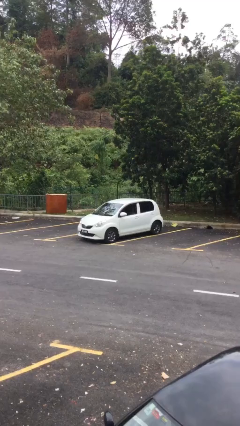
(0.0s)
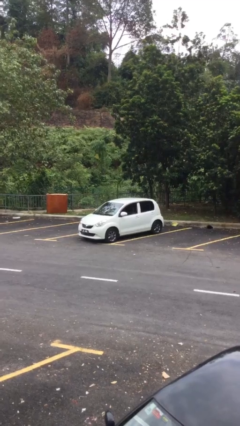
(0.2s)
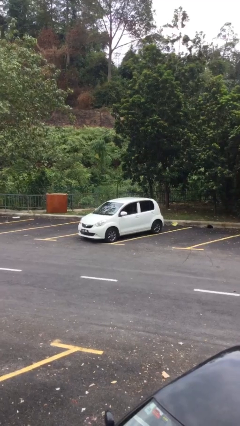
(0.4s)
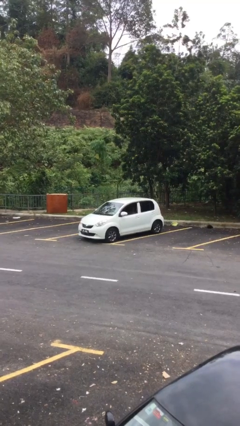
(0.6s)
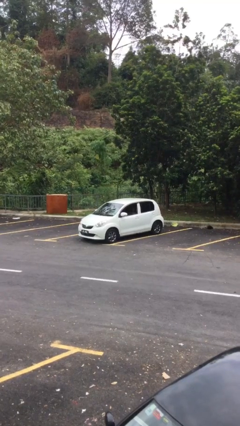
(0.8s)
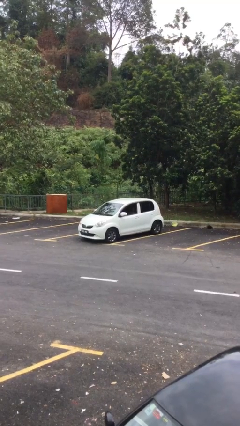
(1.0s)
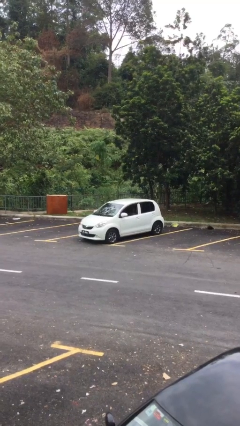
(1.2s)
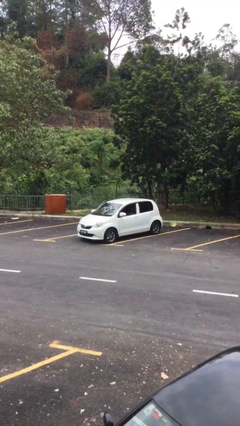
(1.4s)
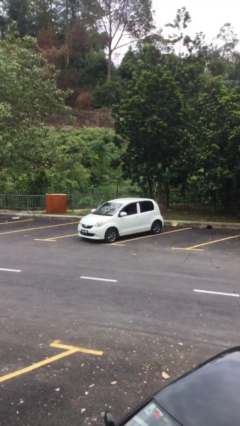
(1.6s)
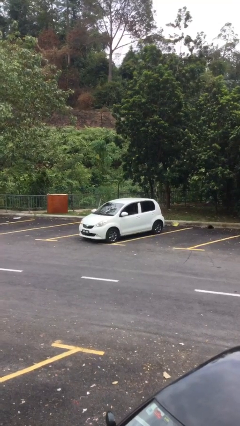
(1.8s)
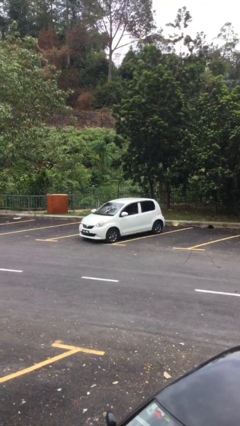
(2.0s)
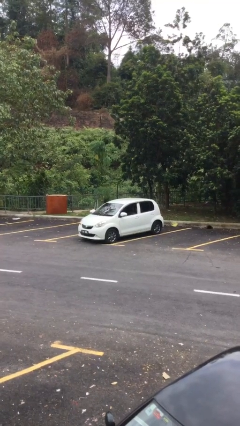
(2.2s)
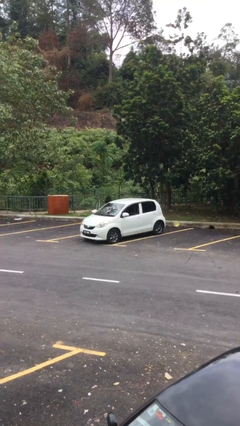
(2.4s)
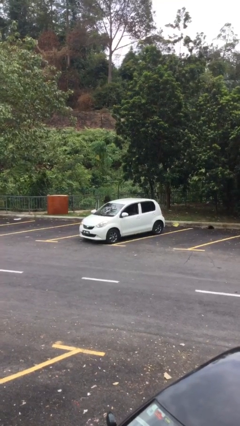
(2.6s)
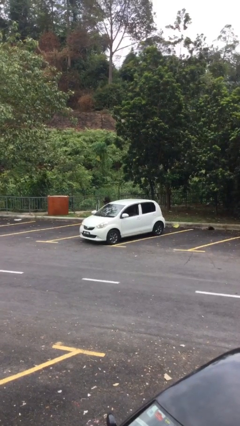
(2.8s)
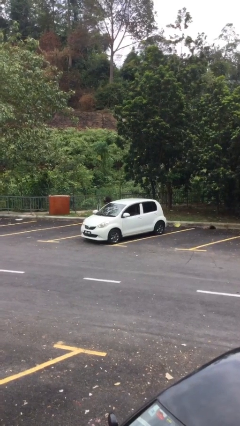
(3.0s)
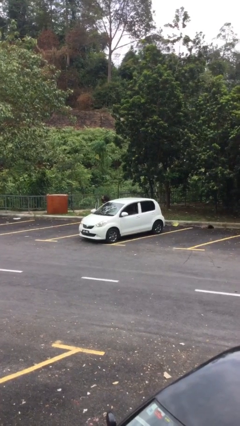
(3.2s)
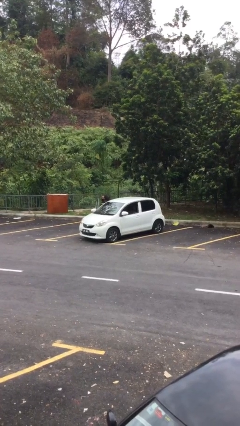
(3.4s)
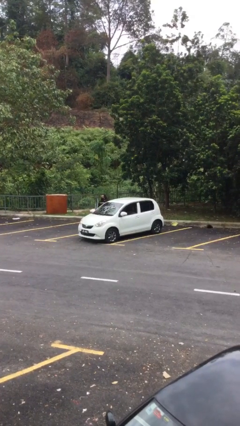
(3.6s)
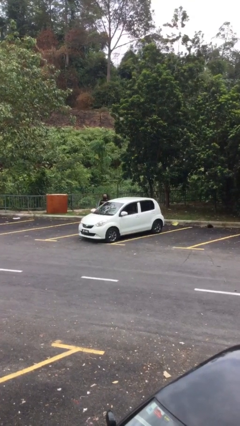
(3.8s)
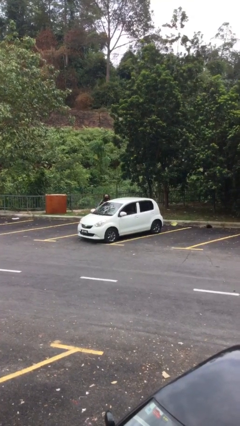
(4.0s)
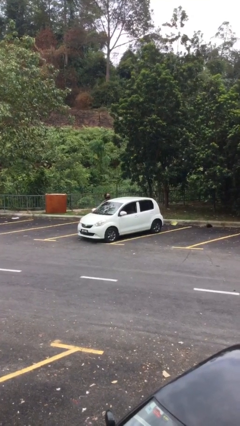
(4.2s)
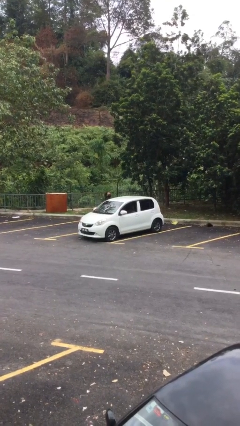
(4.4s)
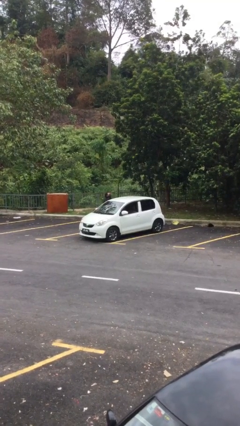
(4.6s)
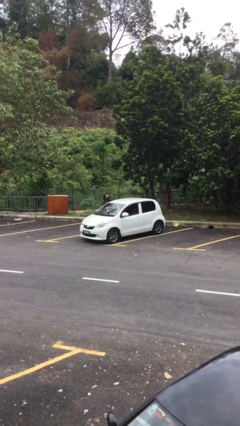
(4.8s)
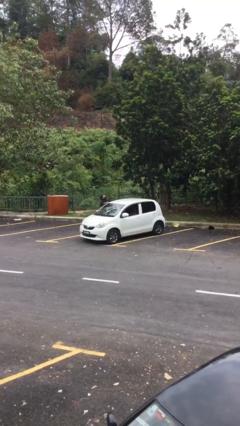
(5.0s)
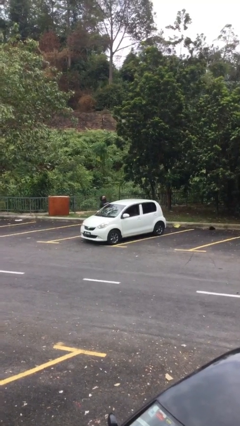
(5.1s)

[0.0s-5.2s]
car drops off person

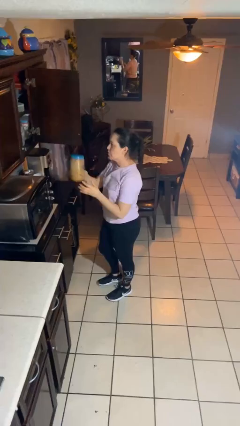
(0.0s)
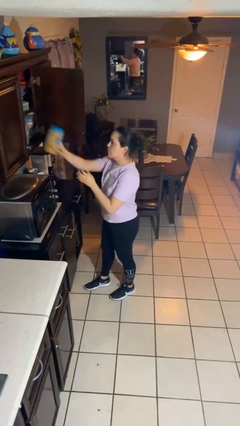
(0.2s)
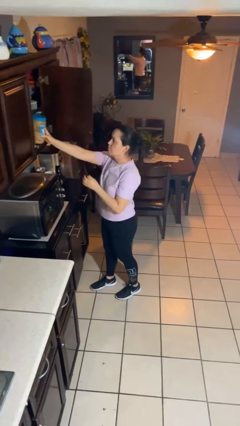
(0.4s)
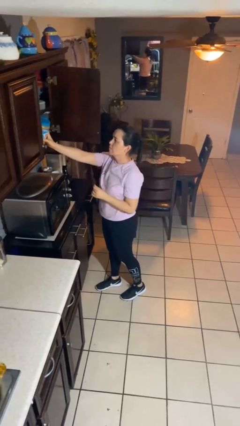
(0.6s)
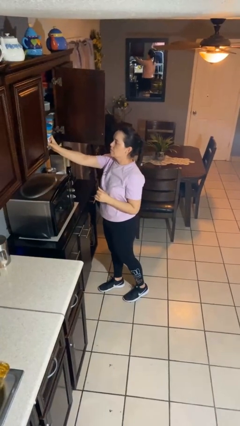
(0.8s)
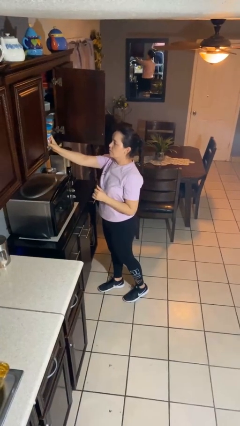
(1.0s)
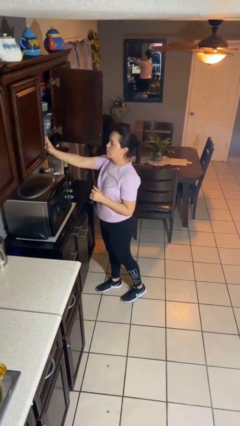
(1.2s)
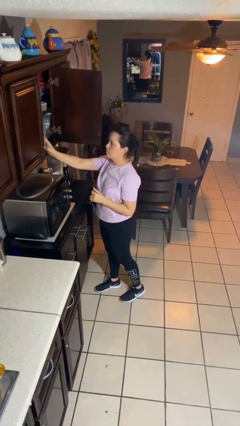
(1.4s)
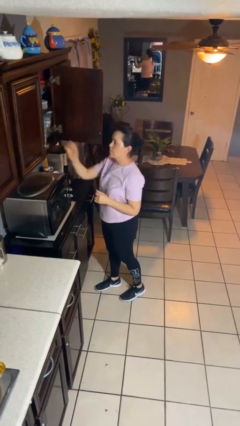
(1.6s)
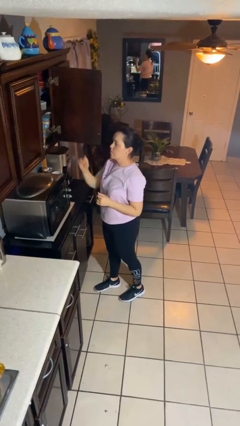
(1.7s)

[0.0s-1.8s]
person puts down object into cabinet

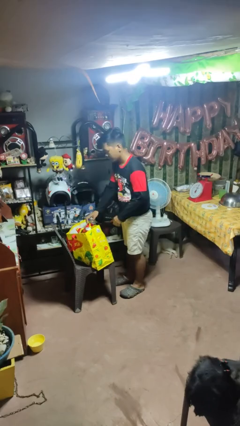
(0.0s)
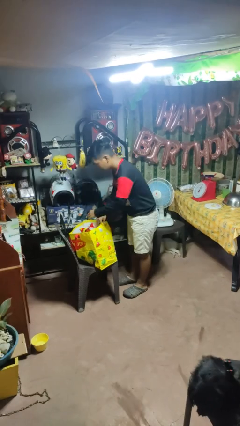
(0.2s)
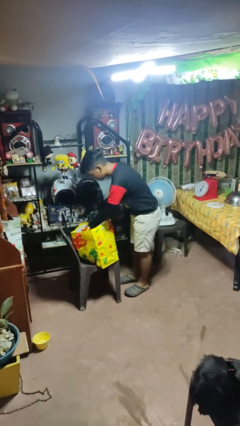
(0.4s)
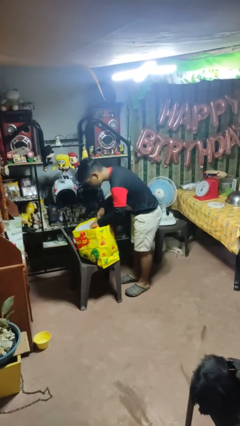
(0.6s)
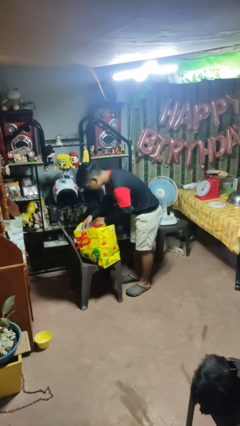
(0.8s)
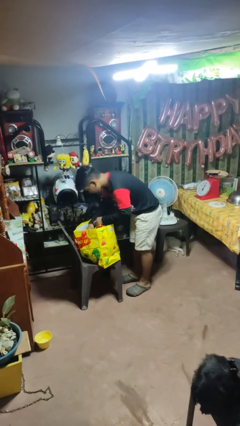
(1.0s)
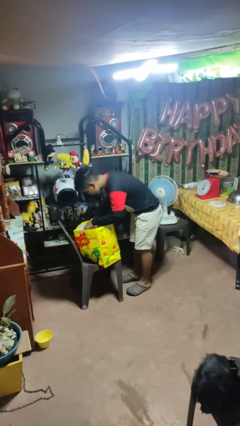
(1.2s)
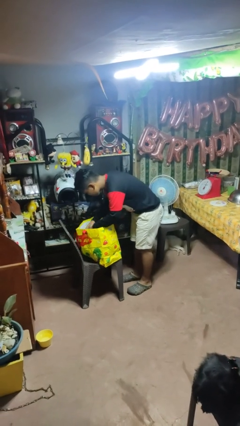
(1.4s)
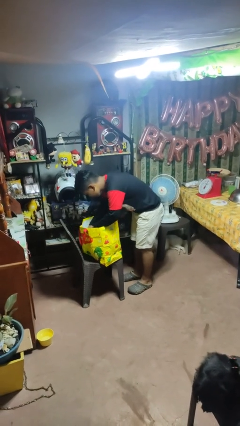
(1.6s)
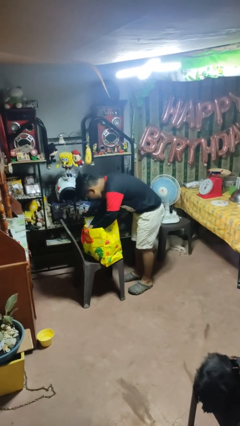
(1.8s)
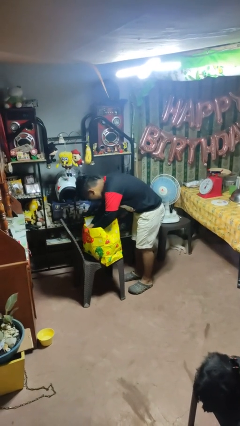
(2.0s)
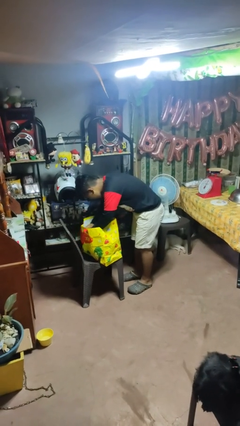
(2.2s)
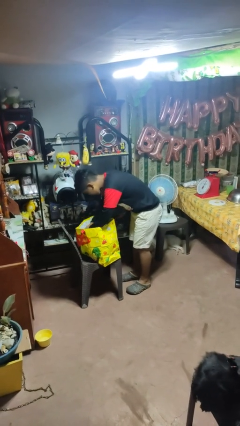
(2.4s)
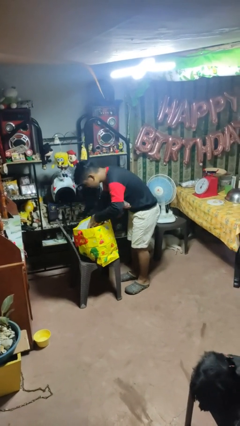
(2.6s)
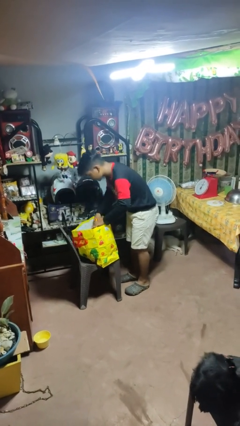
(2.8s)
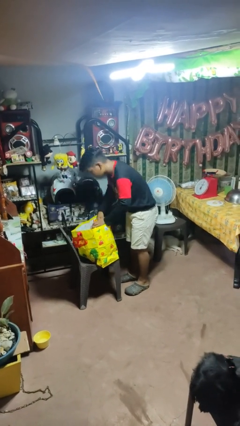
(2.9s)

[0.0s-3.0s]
person searches in bag

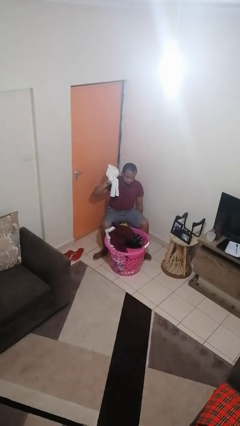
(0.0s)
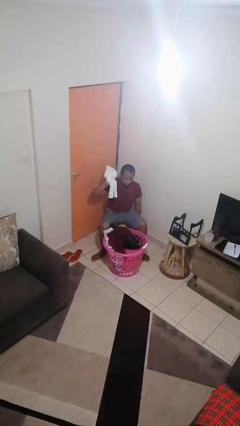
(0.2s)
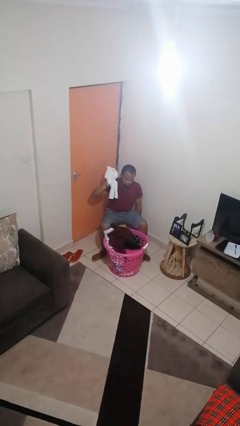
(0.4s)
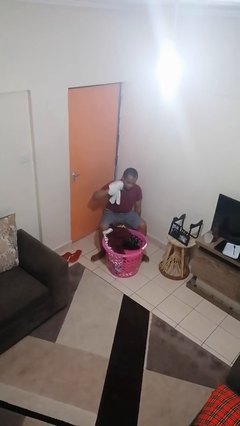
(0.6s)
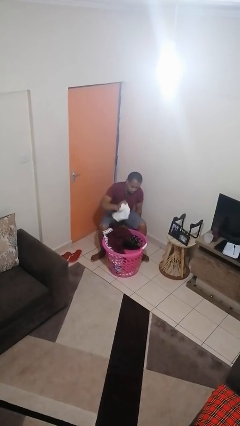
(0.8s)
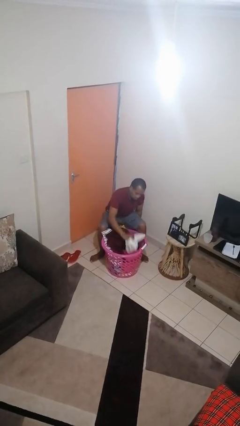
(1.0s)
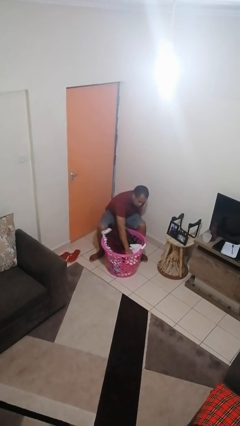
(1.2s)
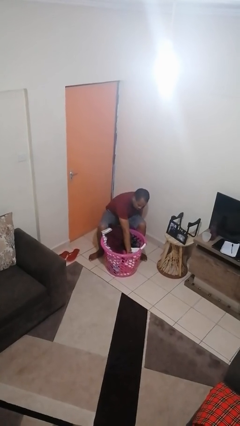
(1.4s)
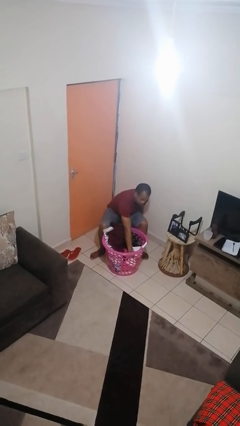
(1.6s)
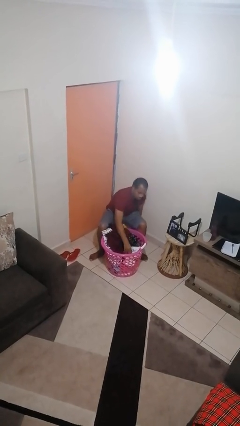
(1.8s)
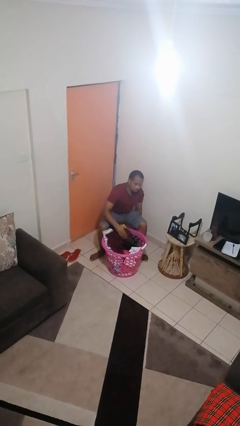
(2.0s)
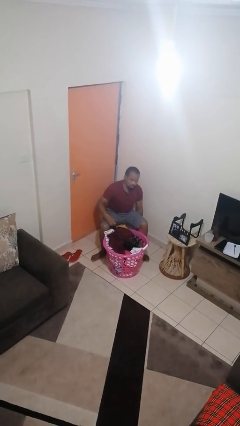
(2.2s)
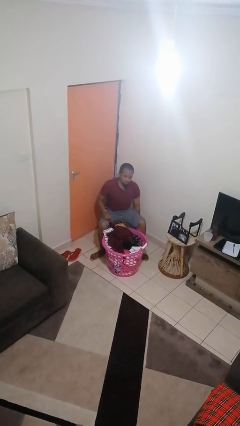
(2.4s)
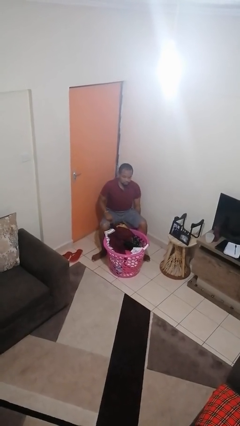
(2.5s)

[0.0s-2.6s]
person puts object into basket

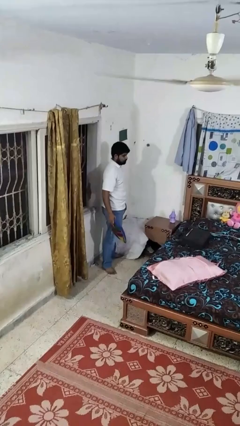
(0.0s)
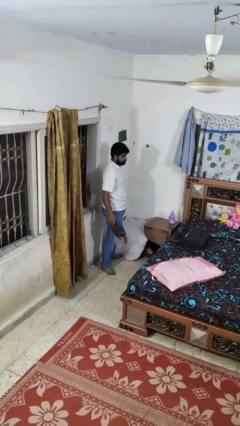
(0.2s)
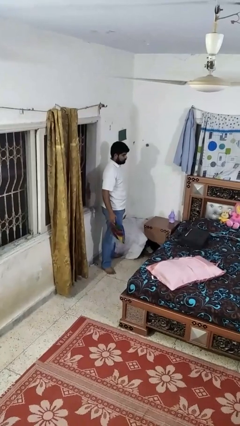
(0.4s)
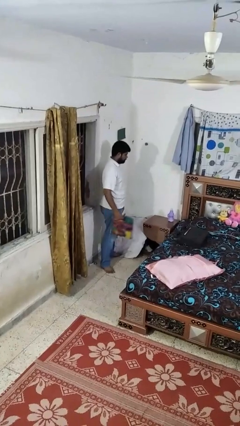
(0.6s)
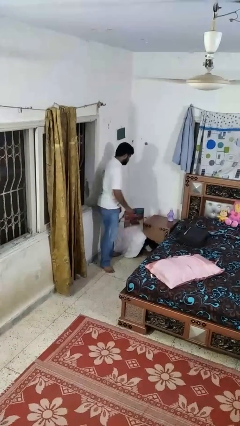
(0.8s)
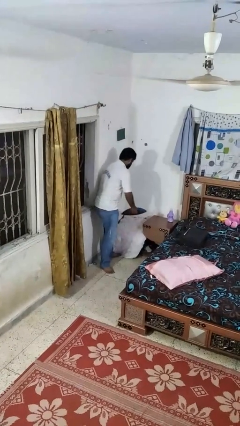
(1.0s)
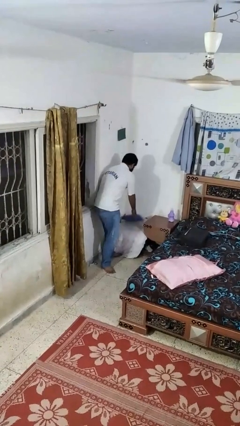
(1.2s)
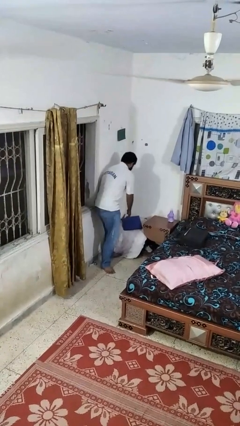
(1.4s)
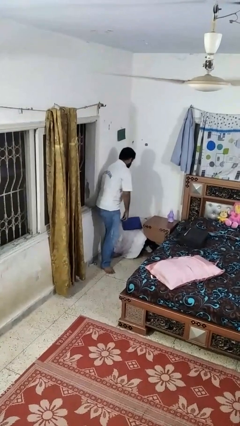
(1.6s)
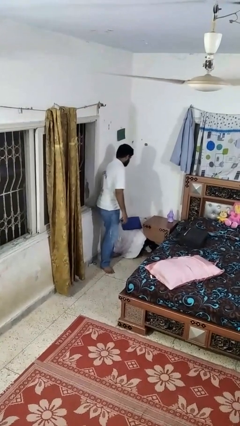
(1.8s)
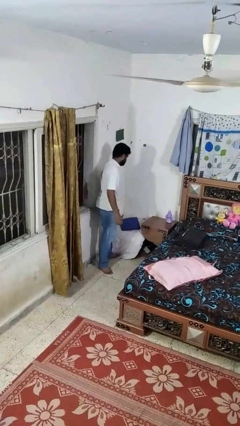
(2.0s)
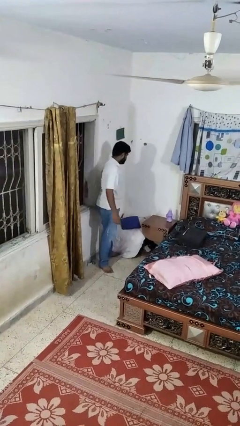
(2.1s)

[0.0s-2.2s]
person puts down object on couch

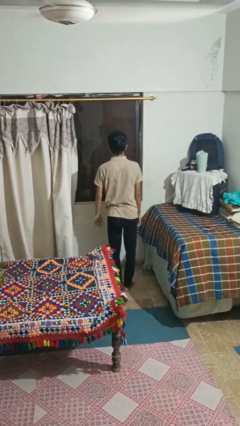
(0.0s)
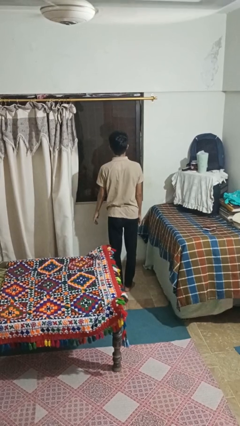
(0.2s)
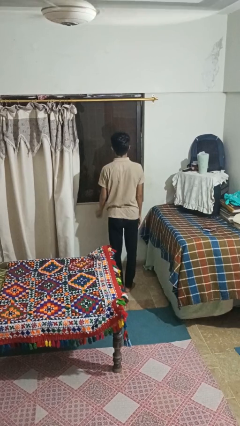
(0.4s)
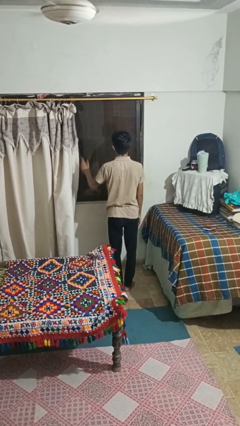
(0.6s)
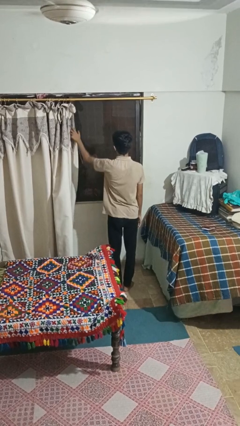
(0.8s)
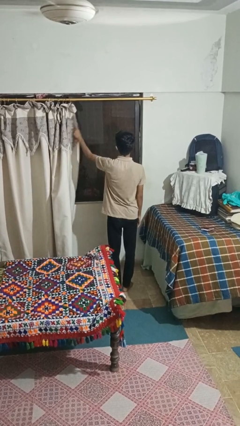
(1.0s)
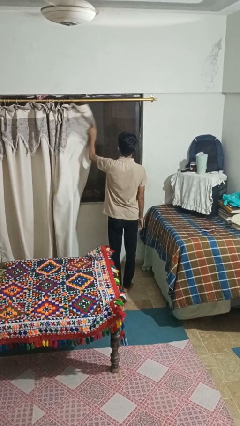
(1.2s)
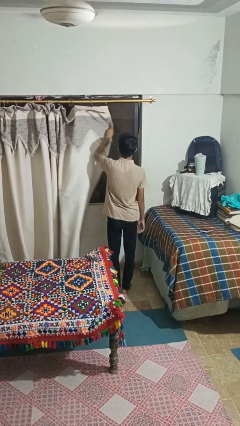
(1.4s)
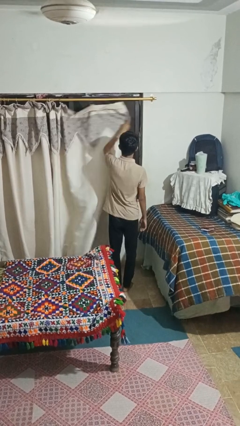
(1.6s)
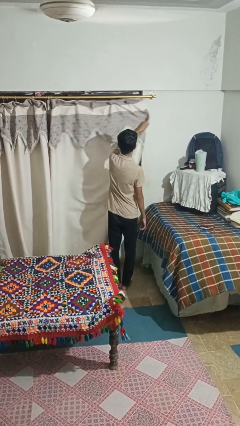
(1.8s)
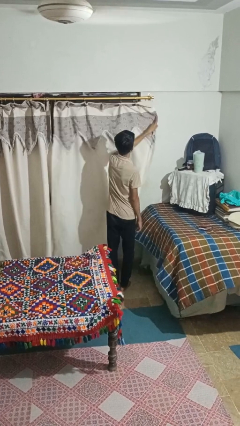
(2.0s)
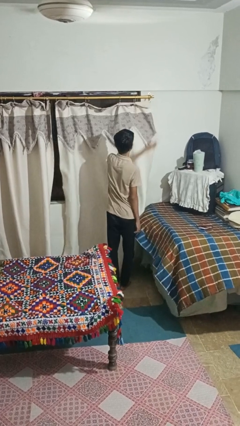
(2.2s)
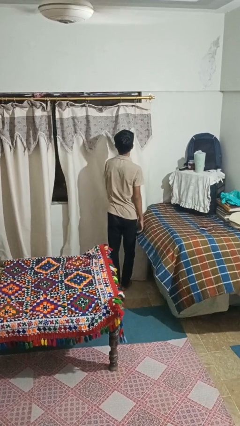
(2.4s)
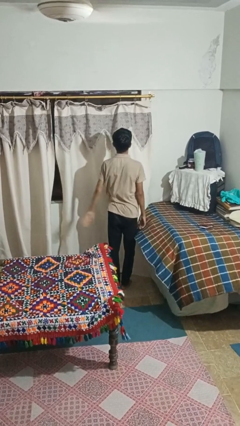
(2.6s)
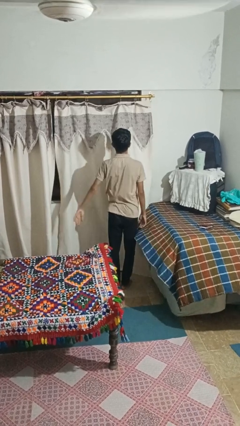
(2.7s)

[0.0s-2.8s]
person closes curtains
